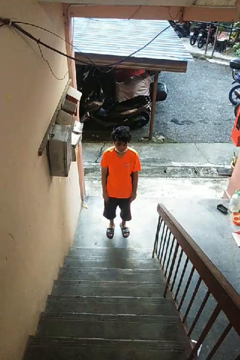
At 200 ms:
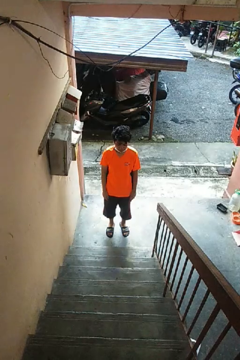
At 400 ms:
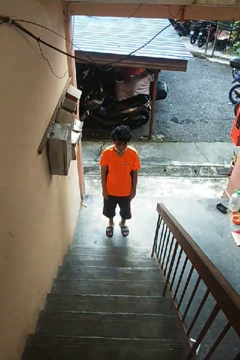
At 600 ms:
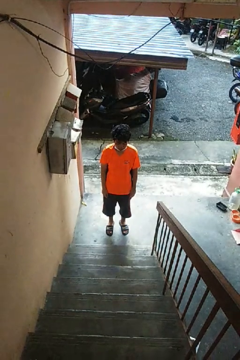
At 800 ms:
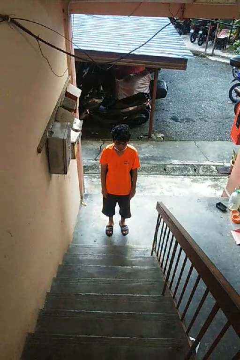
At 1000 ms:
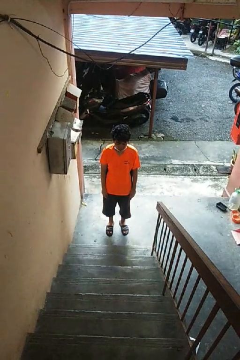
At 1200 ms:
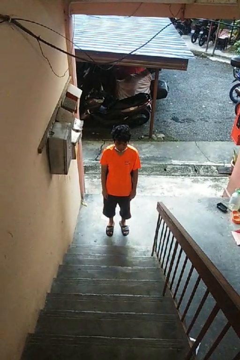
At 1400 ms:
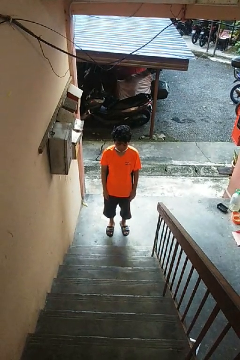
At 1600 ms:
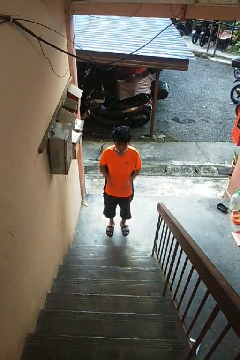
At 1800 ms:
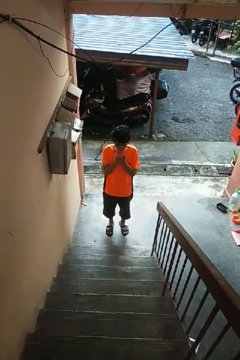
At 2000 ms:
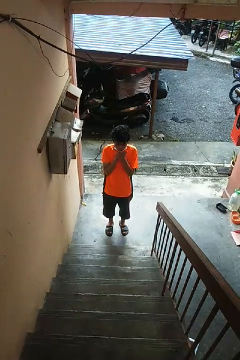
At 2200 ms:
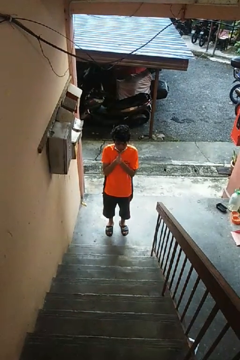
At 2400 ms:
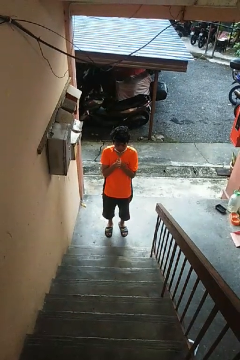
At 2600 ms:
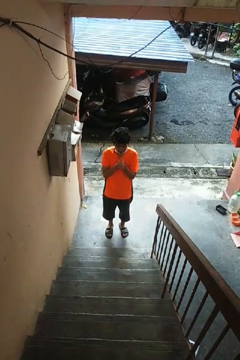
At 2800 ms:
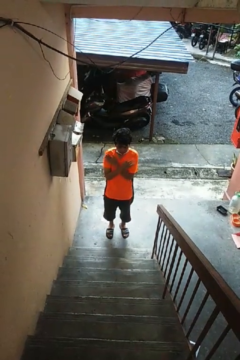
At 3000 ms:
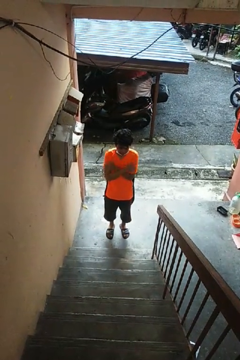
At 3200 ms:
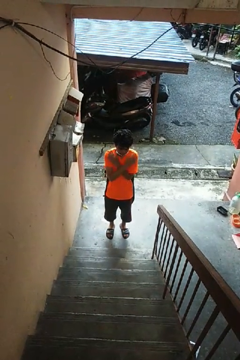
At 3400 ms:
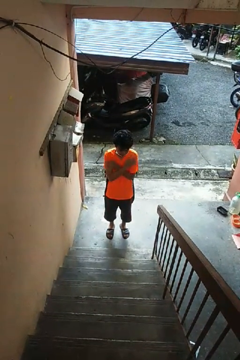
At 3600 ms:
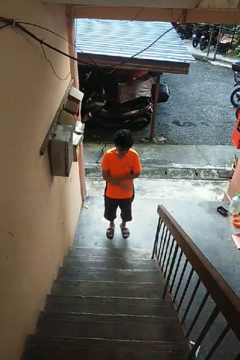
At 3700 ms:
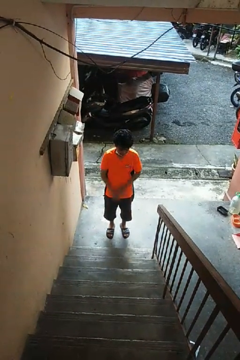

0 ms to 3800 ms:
person blows into hands

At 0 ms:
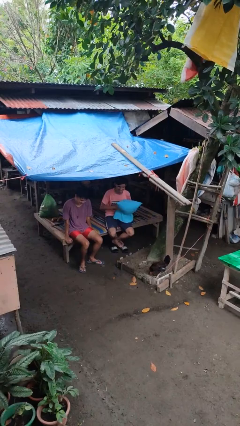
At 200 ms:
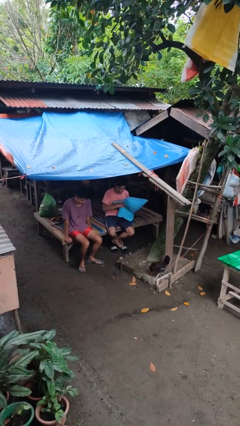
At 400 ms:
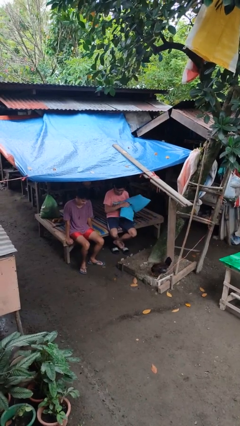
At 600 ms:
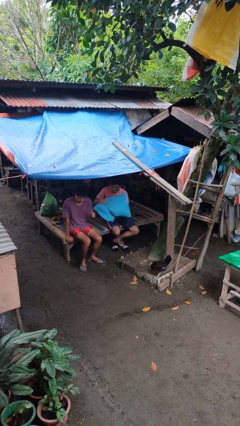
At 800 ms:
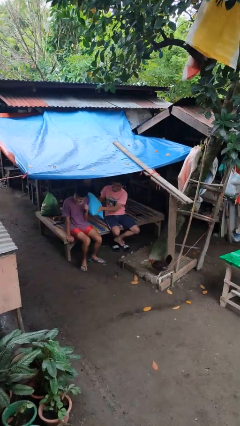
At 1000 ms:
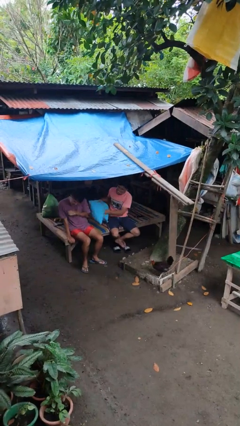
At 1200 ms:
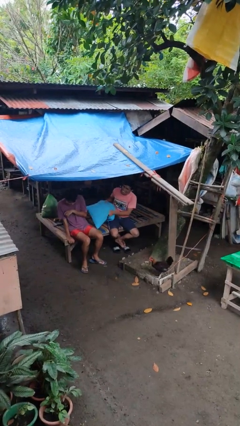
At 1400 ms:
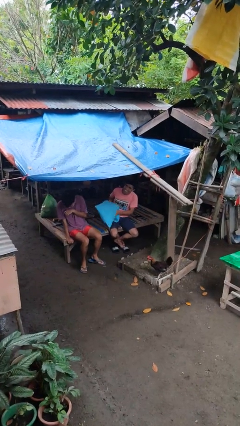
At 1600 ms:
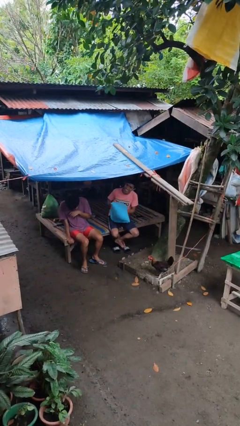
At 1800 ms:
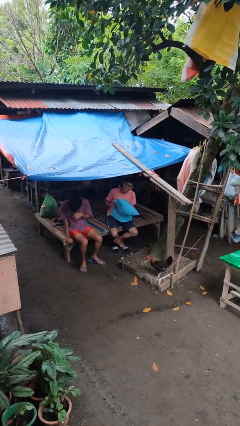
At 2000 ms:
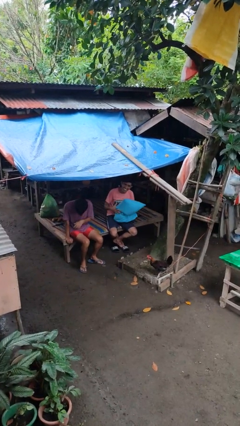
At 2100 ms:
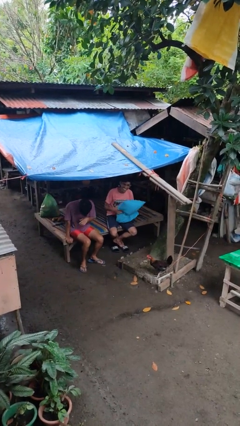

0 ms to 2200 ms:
person hits person with pillow

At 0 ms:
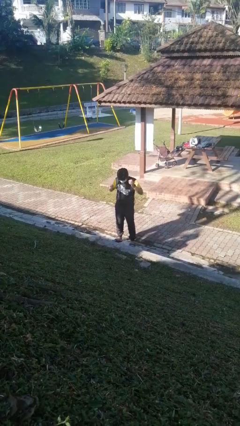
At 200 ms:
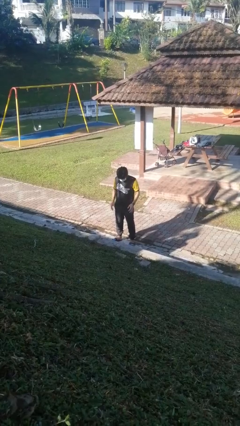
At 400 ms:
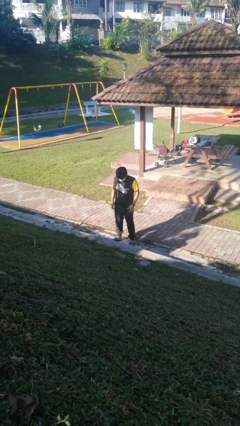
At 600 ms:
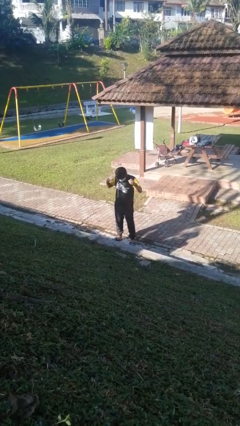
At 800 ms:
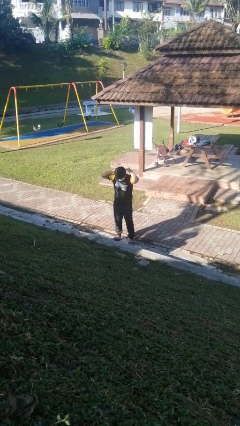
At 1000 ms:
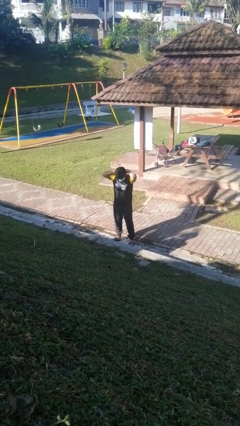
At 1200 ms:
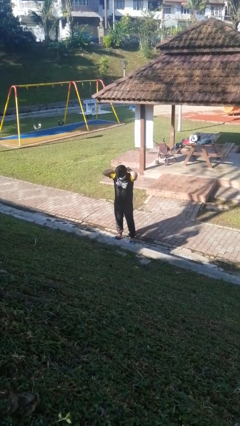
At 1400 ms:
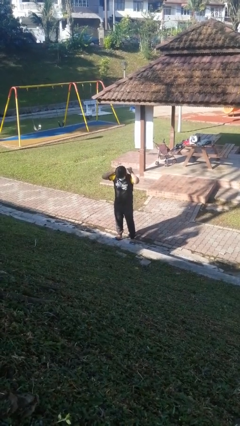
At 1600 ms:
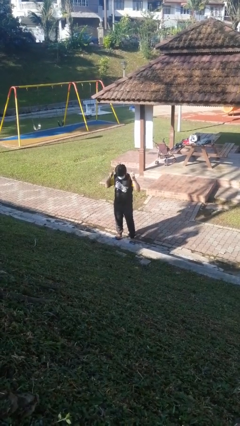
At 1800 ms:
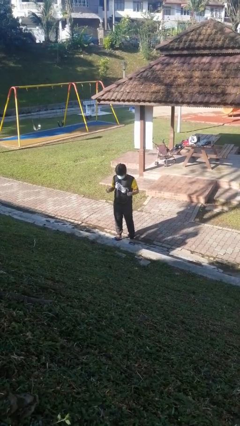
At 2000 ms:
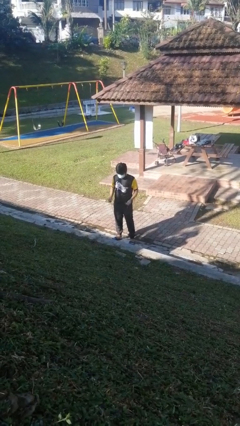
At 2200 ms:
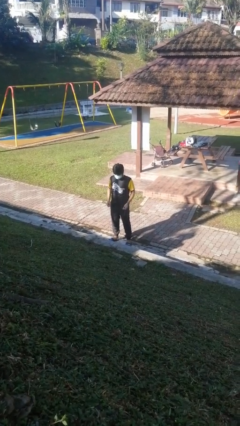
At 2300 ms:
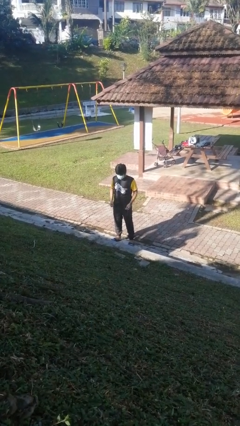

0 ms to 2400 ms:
person takes off necklace

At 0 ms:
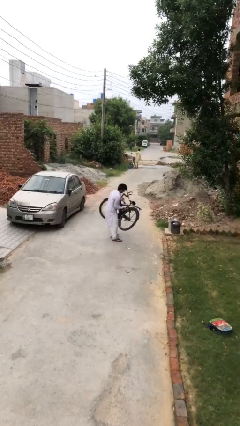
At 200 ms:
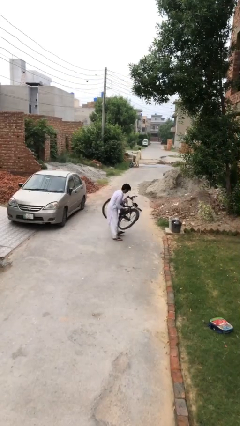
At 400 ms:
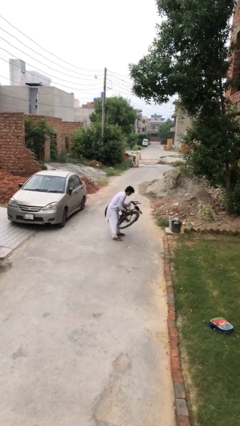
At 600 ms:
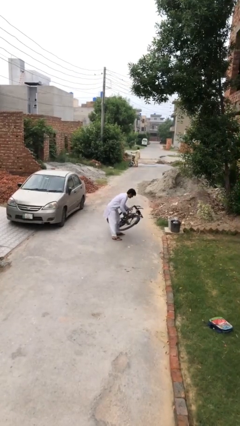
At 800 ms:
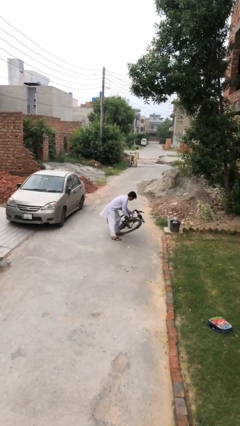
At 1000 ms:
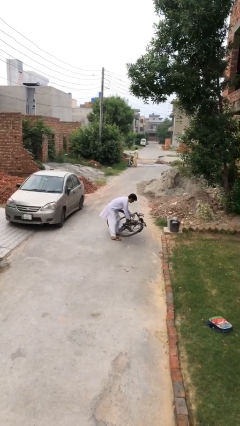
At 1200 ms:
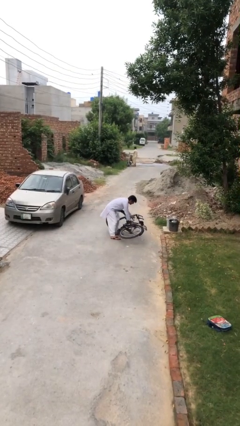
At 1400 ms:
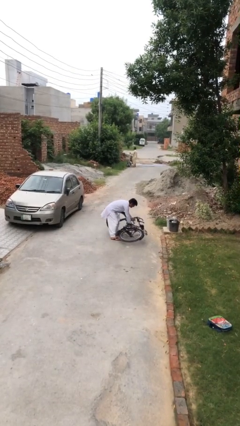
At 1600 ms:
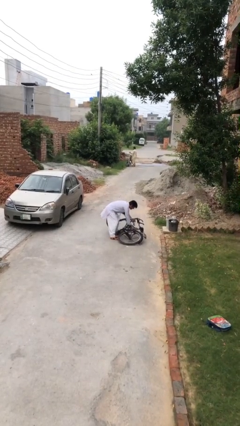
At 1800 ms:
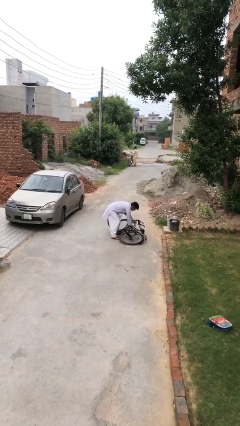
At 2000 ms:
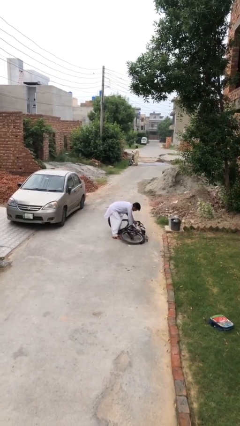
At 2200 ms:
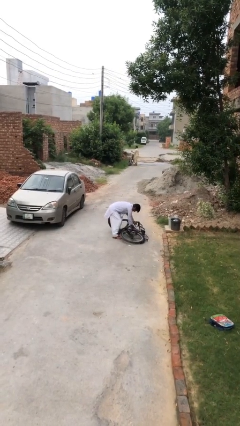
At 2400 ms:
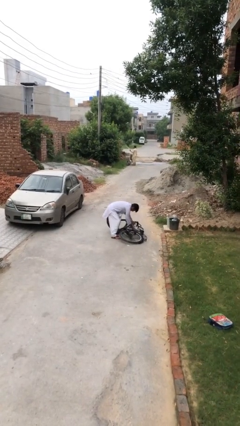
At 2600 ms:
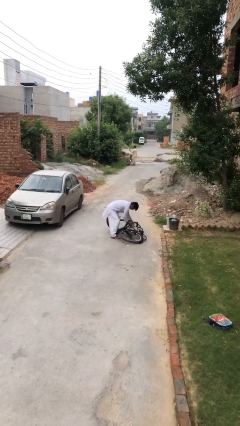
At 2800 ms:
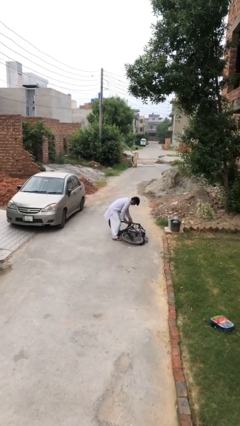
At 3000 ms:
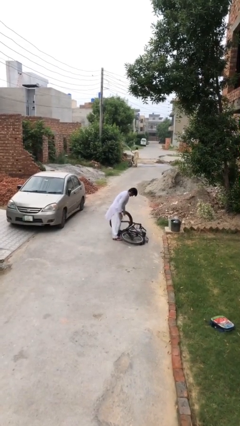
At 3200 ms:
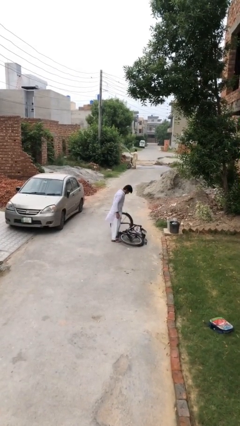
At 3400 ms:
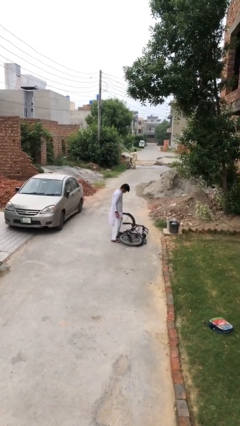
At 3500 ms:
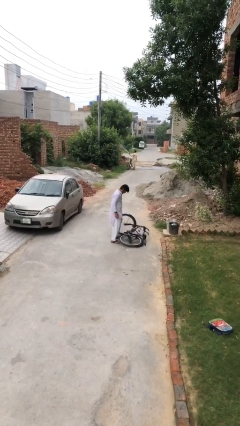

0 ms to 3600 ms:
person puts down object on floor

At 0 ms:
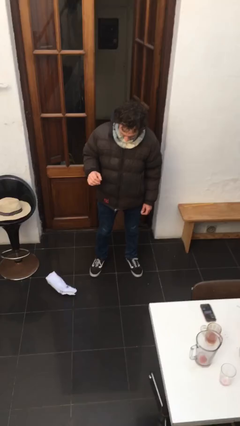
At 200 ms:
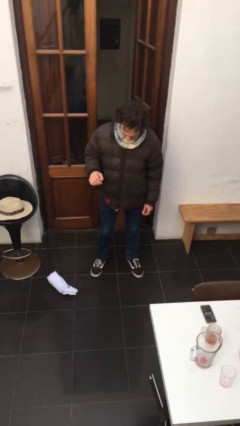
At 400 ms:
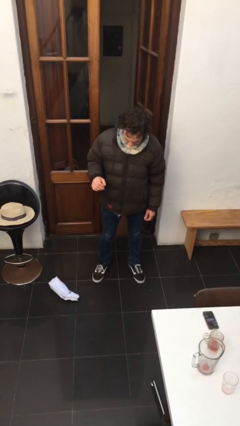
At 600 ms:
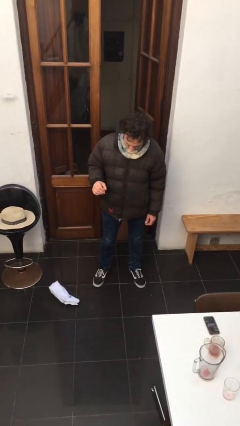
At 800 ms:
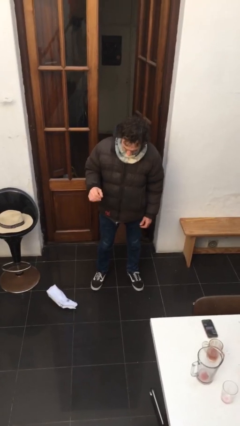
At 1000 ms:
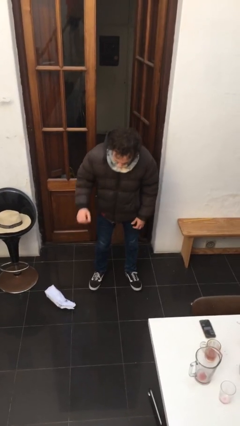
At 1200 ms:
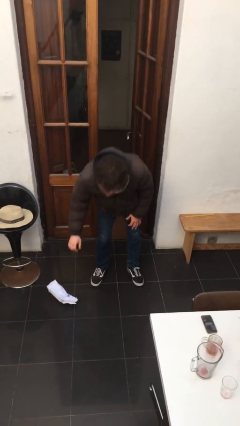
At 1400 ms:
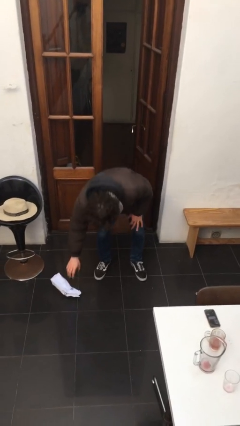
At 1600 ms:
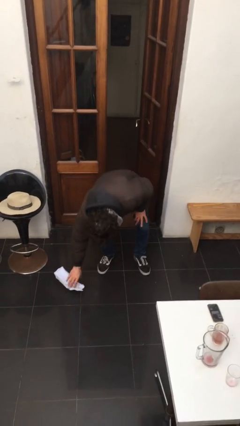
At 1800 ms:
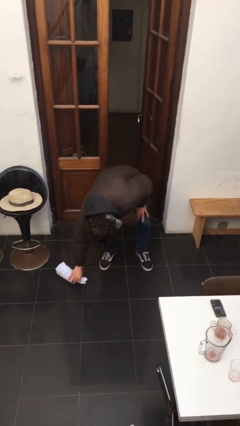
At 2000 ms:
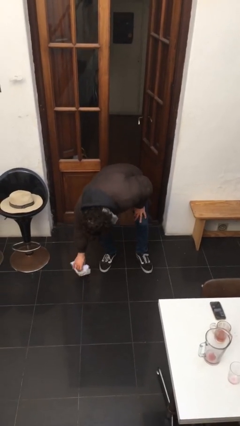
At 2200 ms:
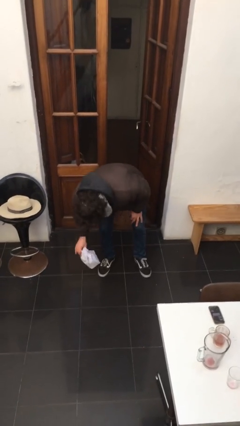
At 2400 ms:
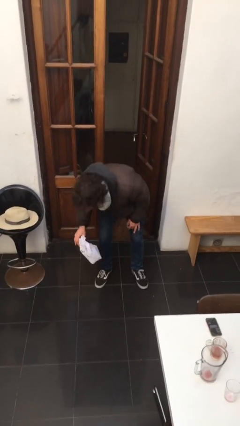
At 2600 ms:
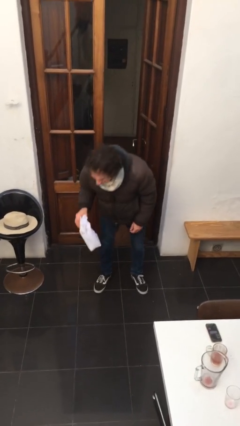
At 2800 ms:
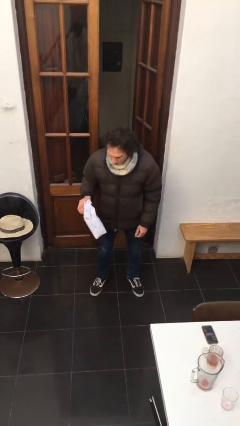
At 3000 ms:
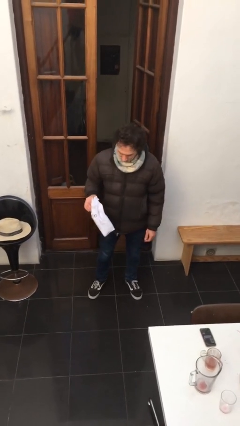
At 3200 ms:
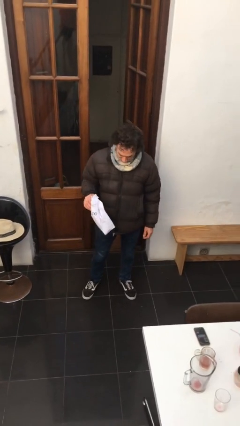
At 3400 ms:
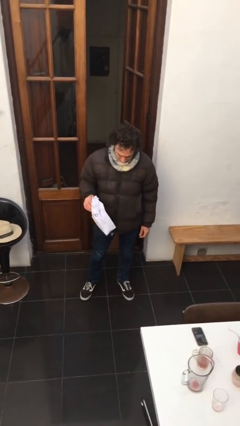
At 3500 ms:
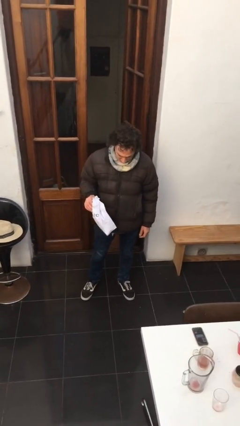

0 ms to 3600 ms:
person picks up object from floor

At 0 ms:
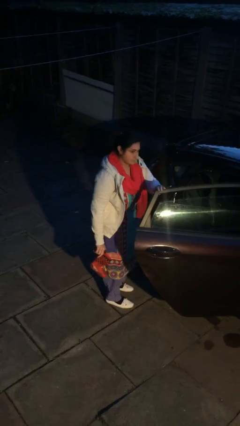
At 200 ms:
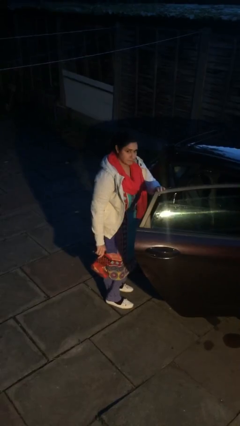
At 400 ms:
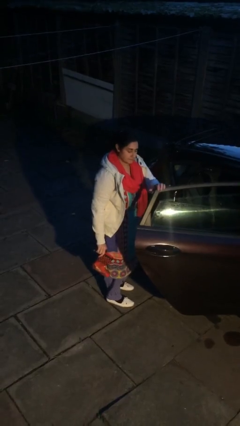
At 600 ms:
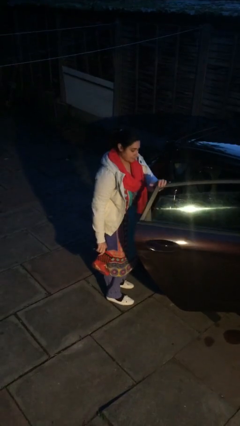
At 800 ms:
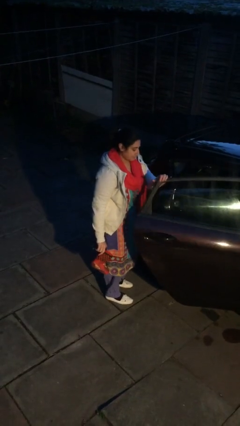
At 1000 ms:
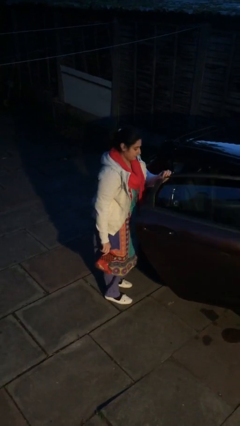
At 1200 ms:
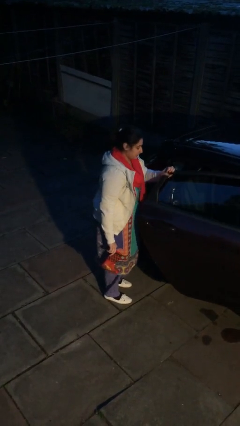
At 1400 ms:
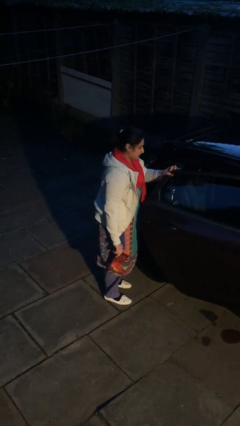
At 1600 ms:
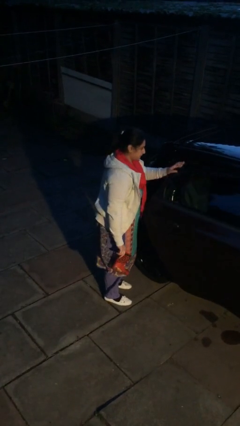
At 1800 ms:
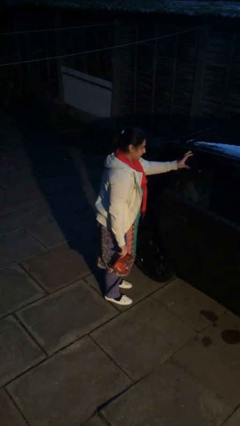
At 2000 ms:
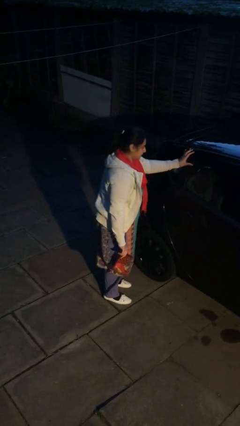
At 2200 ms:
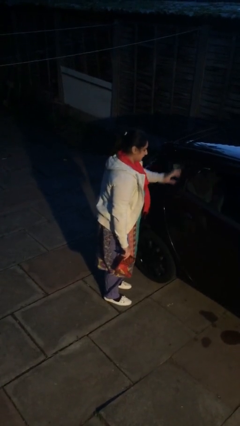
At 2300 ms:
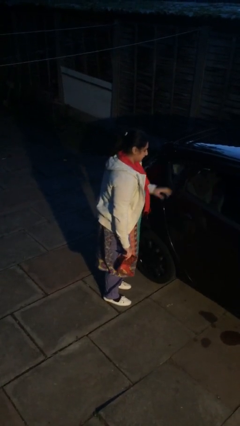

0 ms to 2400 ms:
person closes car door
